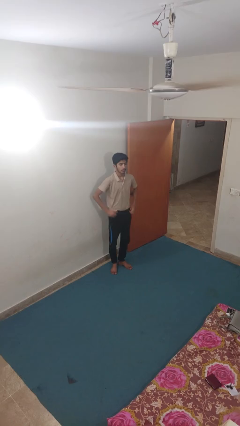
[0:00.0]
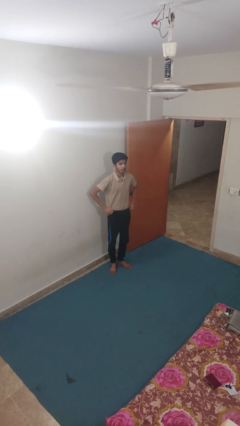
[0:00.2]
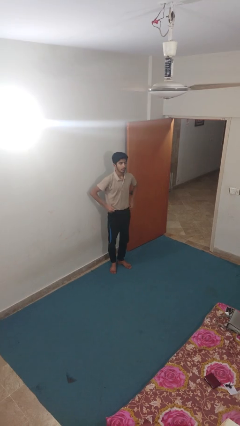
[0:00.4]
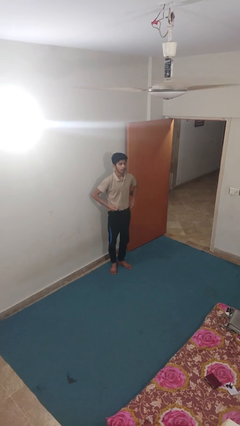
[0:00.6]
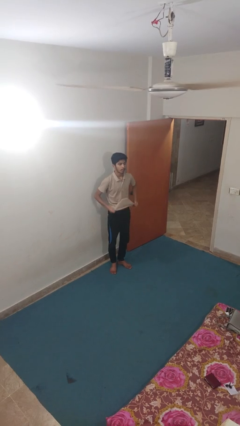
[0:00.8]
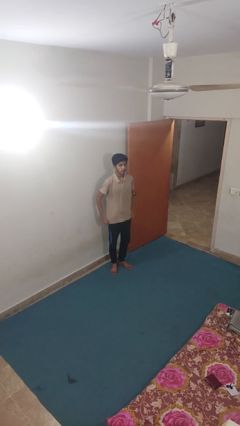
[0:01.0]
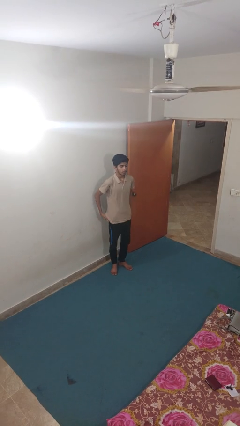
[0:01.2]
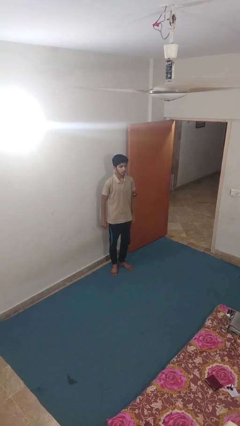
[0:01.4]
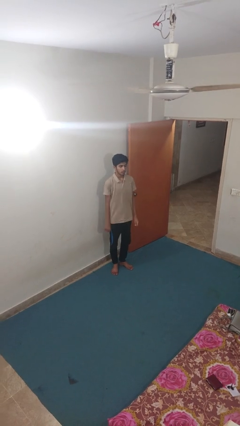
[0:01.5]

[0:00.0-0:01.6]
person untucks shirt

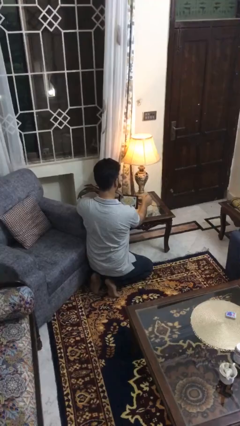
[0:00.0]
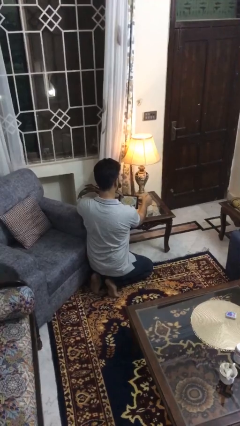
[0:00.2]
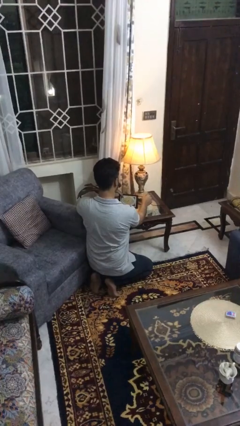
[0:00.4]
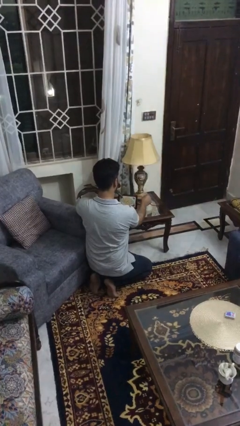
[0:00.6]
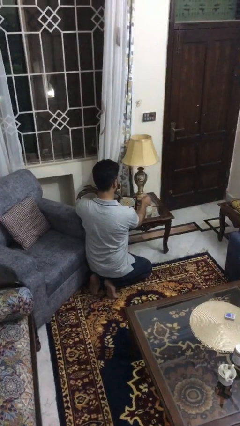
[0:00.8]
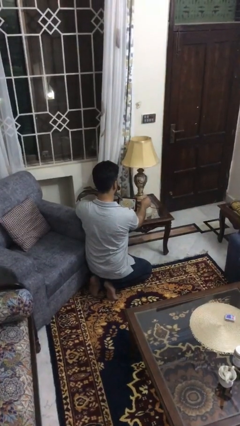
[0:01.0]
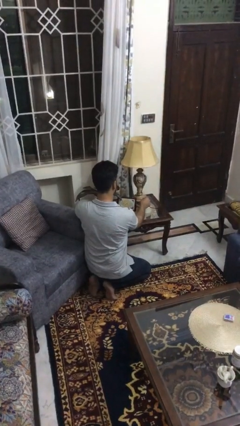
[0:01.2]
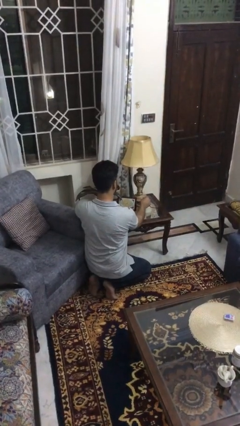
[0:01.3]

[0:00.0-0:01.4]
person turns off lamp

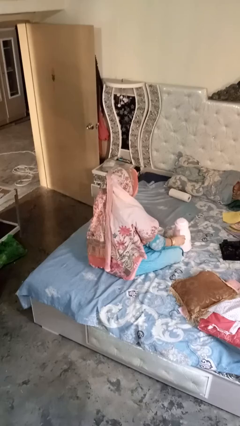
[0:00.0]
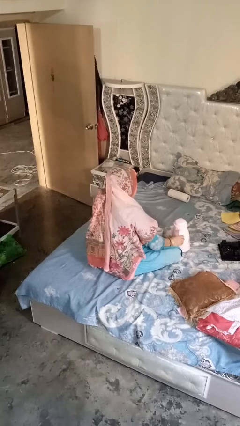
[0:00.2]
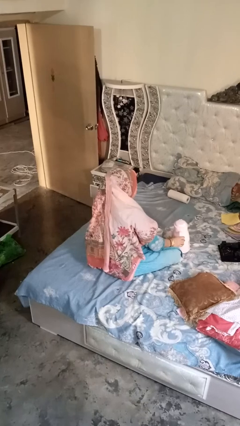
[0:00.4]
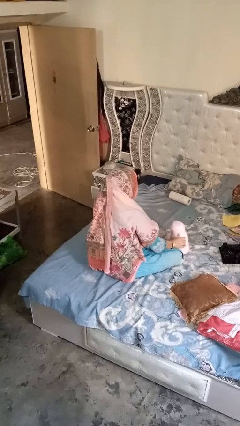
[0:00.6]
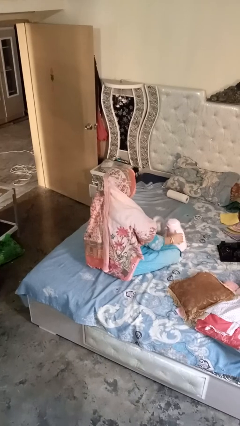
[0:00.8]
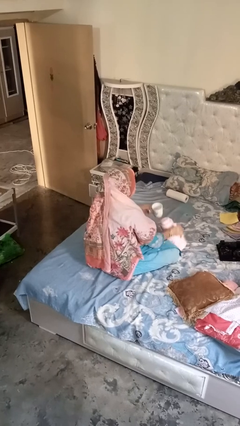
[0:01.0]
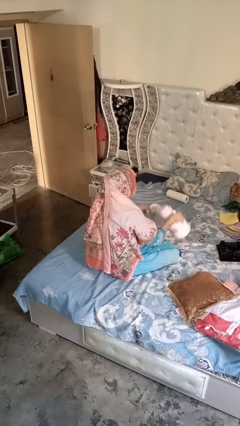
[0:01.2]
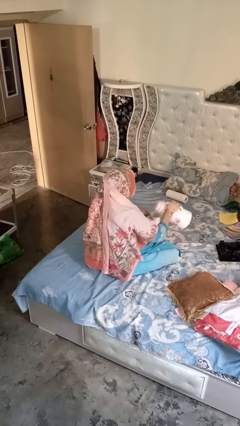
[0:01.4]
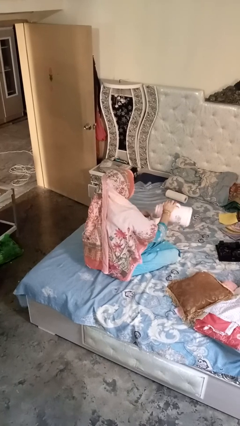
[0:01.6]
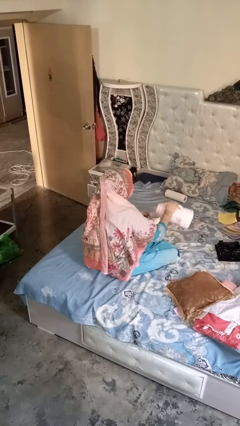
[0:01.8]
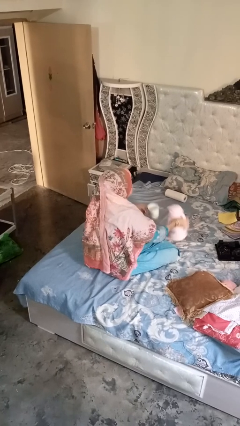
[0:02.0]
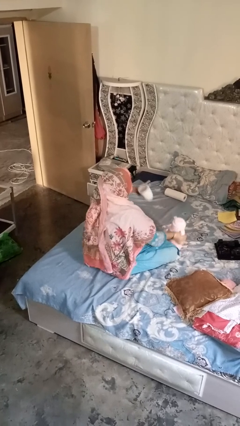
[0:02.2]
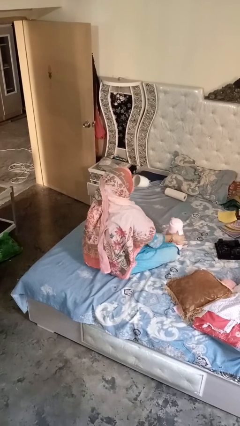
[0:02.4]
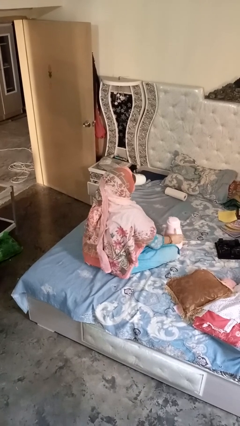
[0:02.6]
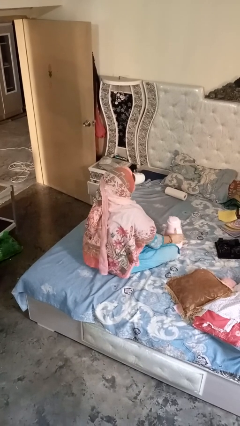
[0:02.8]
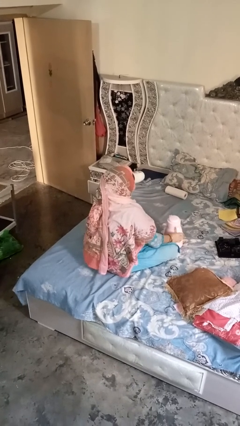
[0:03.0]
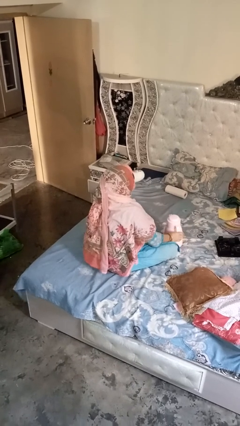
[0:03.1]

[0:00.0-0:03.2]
person pours coffee into mug

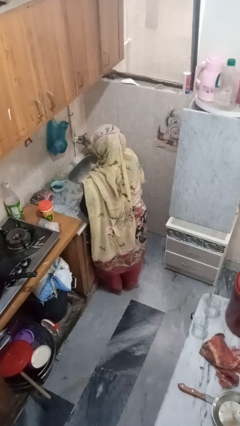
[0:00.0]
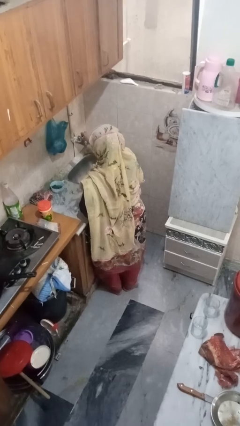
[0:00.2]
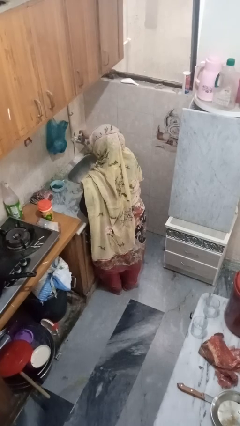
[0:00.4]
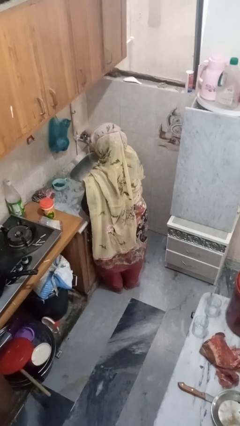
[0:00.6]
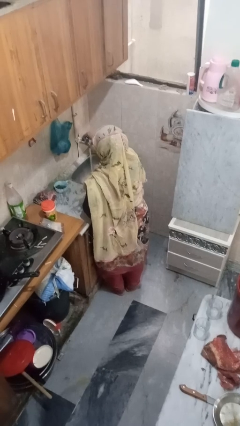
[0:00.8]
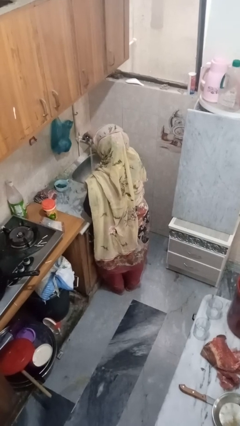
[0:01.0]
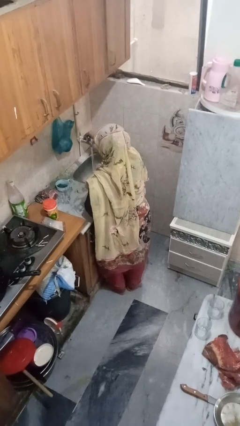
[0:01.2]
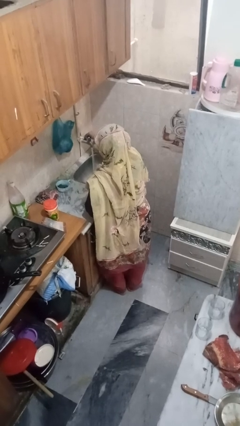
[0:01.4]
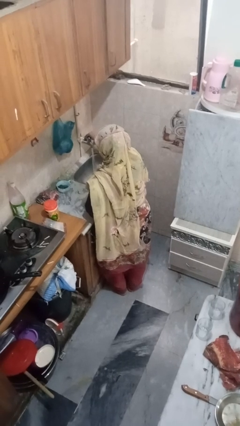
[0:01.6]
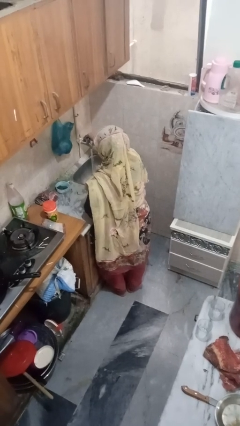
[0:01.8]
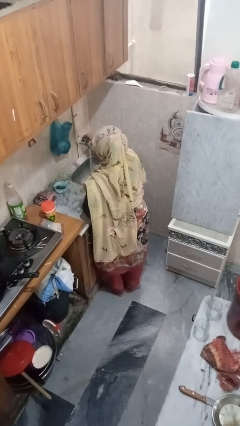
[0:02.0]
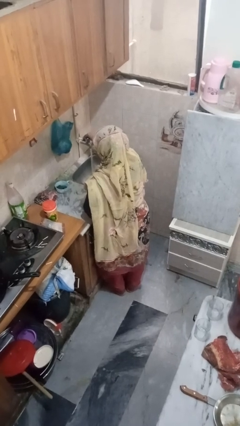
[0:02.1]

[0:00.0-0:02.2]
person turns on faucet

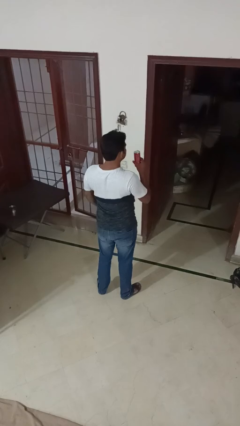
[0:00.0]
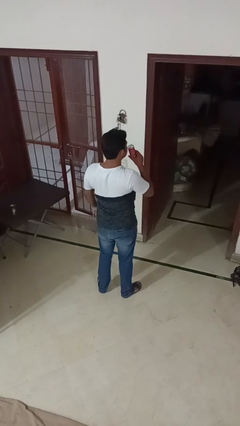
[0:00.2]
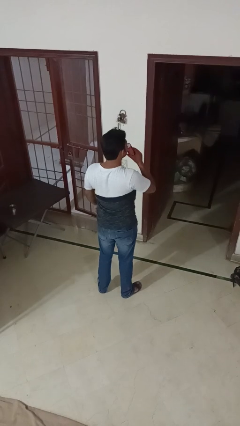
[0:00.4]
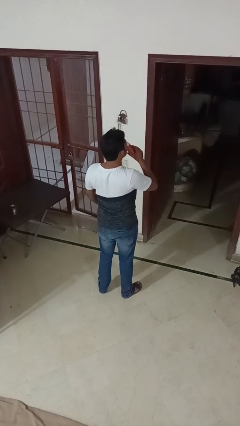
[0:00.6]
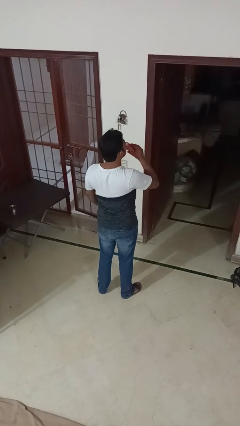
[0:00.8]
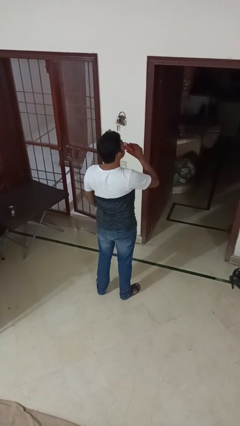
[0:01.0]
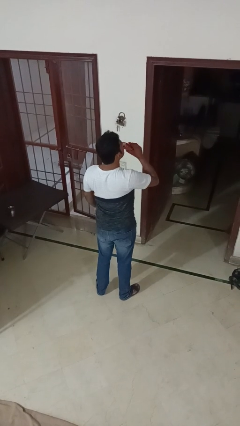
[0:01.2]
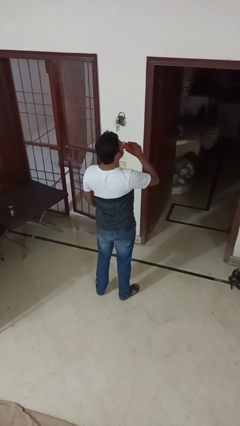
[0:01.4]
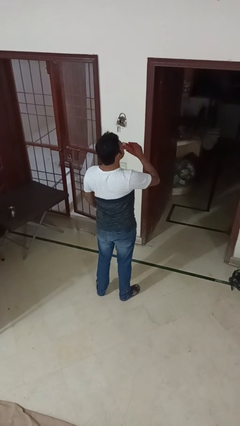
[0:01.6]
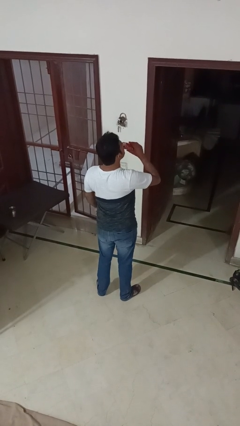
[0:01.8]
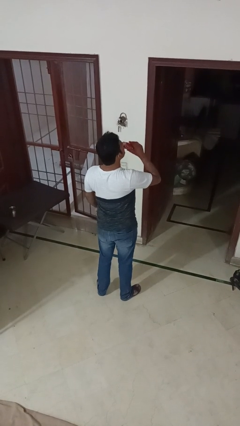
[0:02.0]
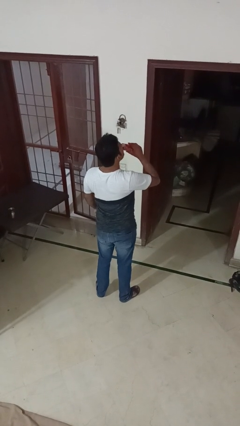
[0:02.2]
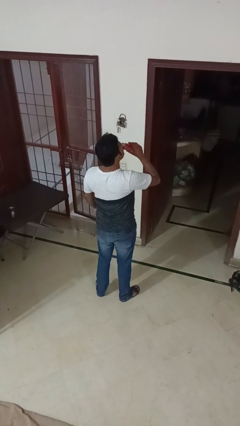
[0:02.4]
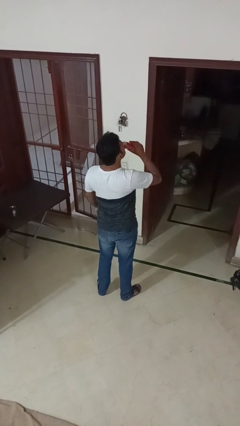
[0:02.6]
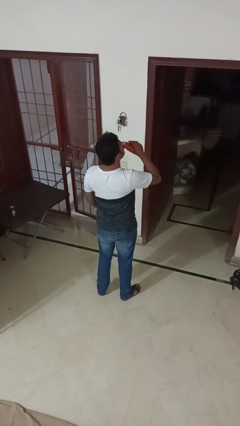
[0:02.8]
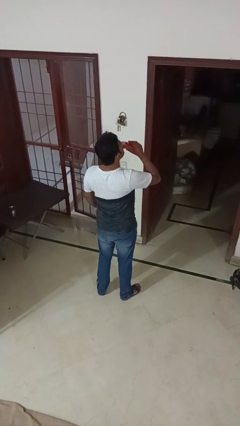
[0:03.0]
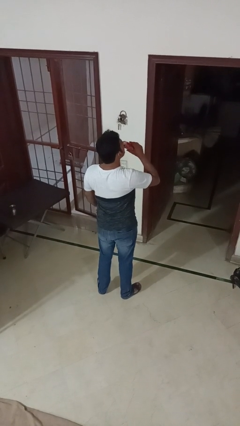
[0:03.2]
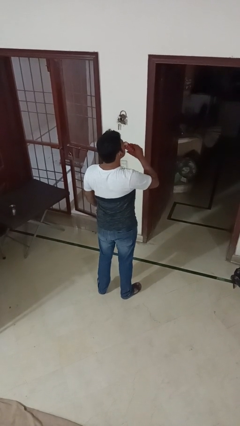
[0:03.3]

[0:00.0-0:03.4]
person drinks from beverage can

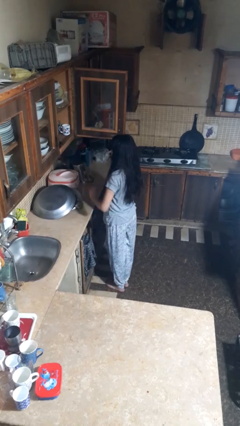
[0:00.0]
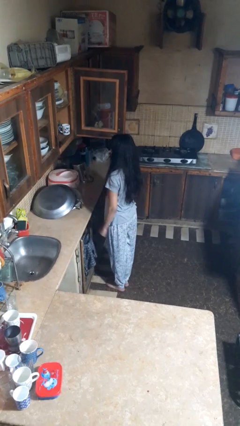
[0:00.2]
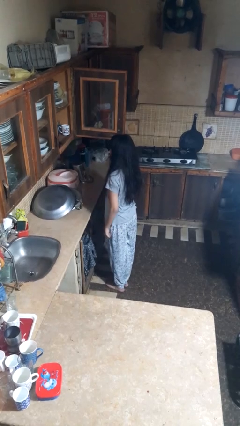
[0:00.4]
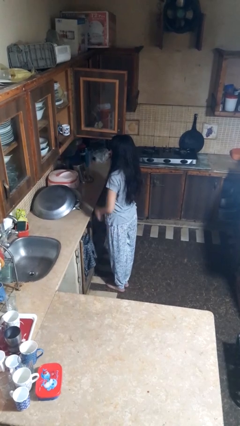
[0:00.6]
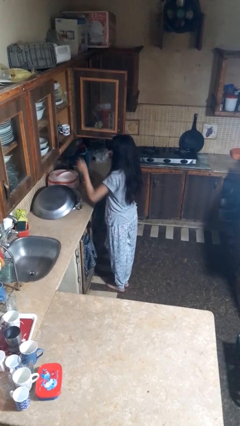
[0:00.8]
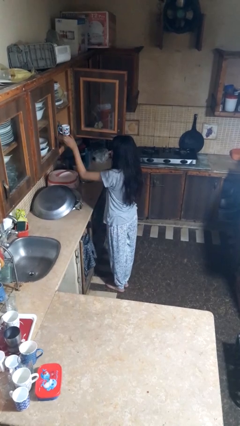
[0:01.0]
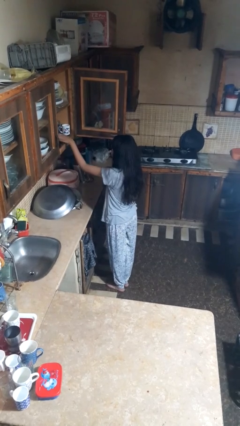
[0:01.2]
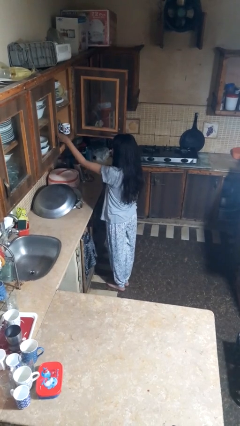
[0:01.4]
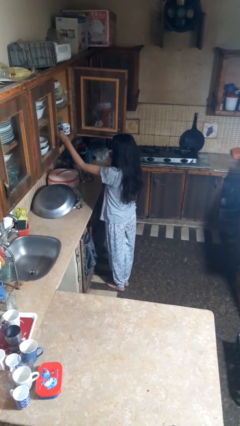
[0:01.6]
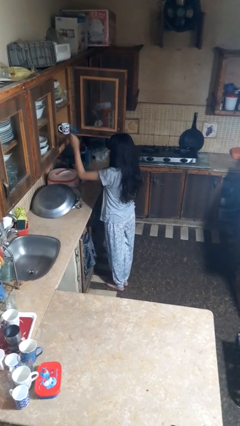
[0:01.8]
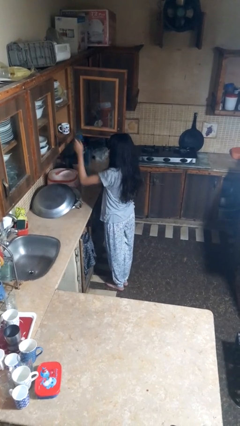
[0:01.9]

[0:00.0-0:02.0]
person takes object from cabinet

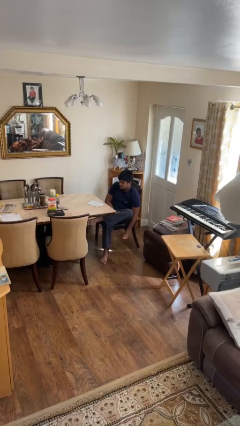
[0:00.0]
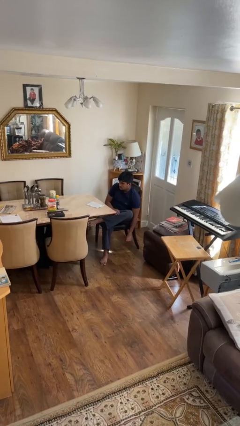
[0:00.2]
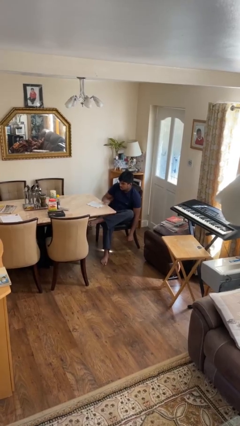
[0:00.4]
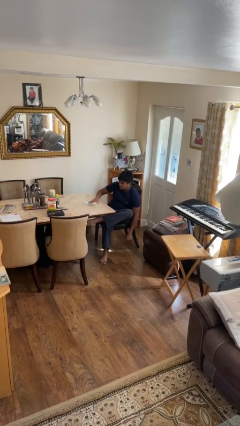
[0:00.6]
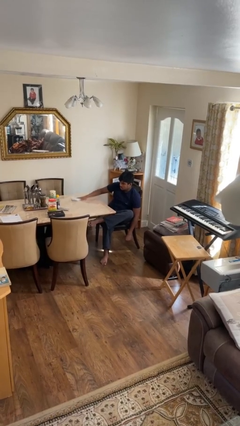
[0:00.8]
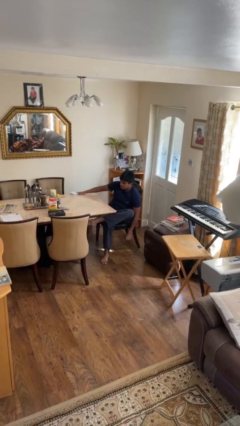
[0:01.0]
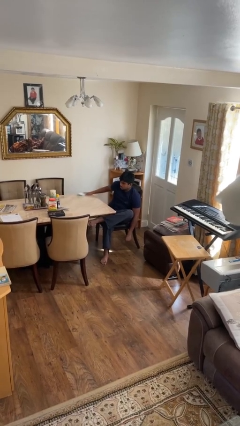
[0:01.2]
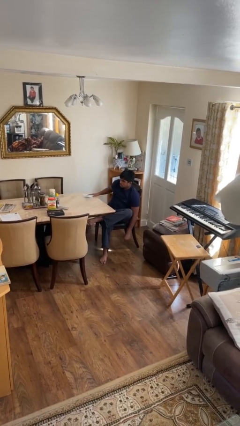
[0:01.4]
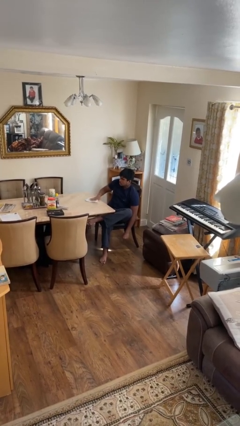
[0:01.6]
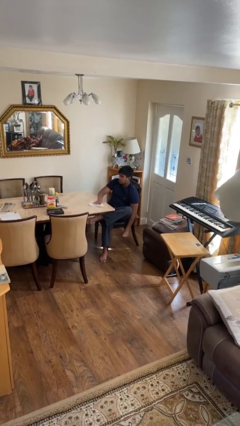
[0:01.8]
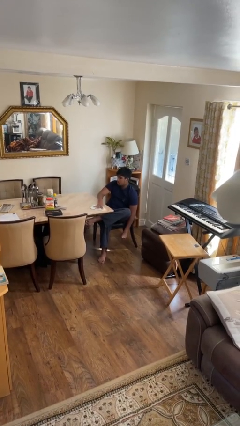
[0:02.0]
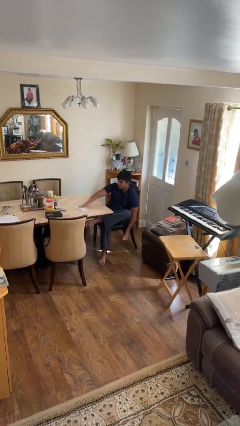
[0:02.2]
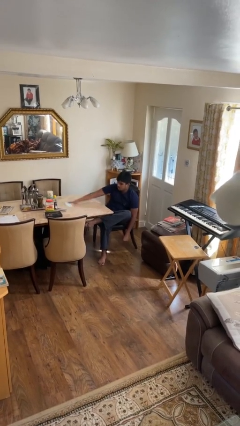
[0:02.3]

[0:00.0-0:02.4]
person cleans table with rag

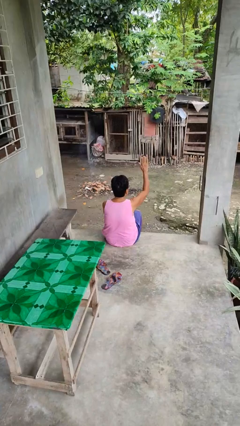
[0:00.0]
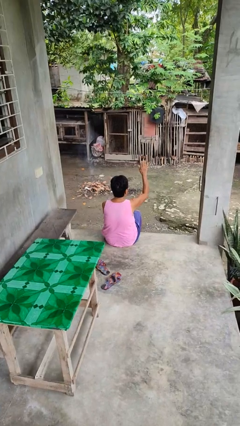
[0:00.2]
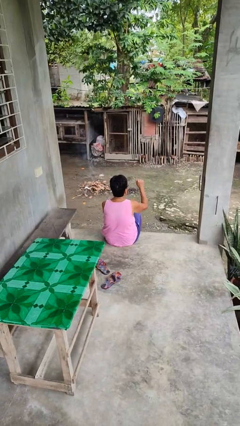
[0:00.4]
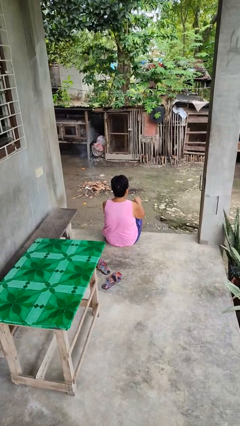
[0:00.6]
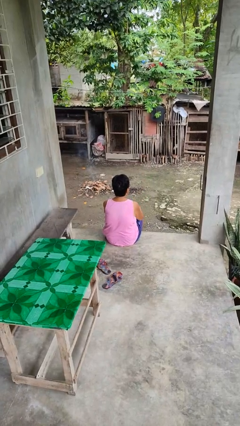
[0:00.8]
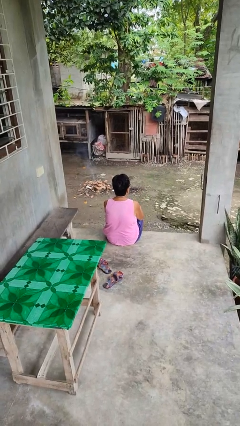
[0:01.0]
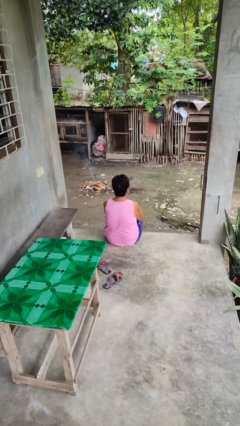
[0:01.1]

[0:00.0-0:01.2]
person gestures lower hand
